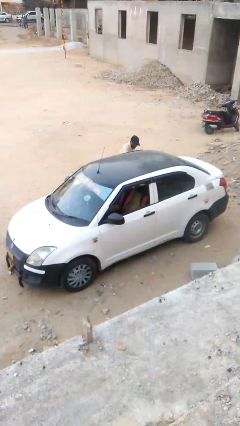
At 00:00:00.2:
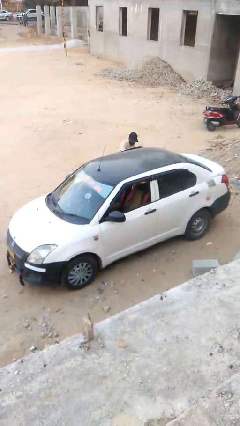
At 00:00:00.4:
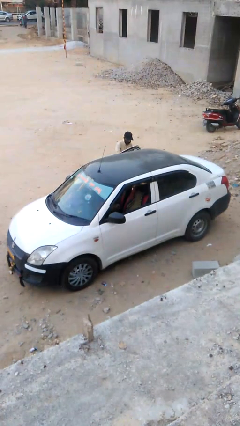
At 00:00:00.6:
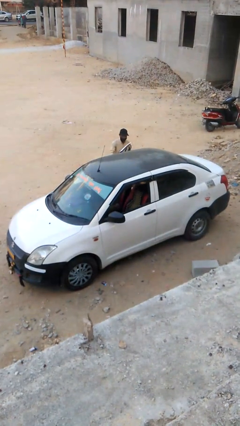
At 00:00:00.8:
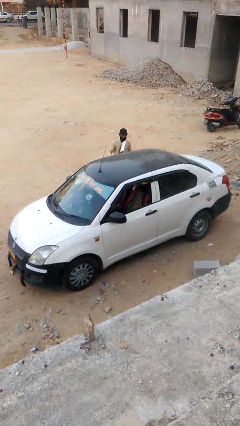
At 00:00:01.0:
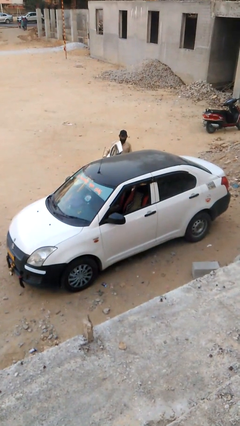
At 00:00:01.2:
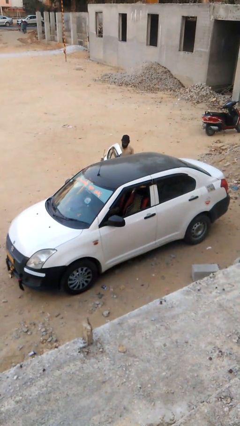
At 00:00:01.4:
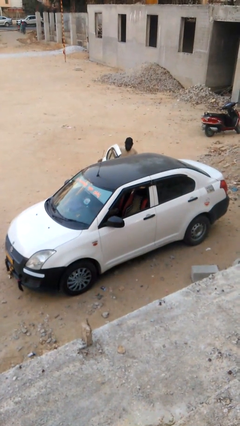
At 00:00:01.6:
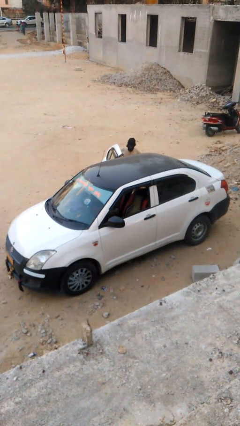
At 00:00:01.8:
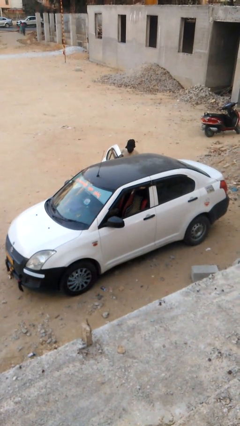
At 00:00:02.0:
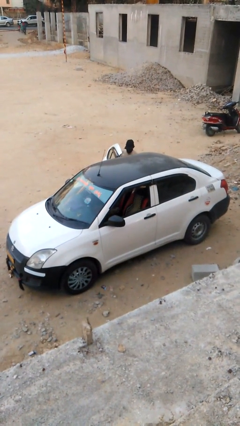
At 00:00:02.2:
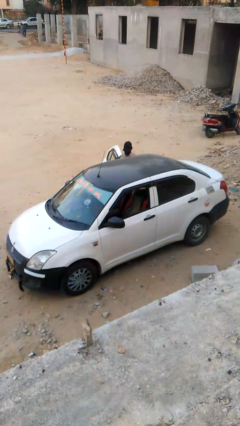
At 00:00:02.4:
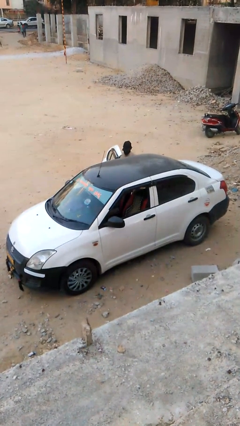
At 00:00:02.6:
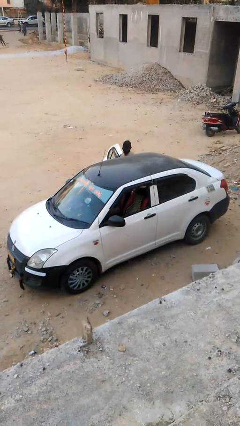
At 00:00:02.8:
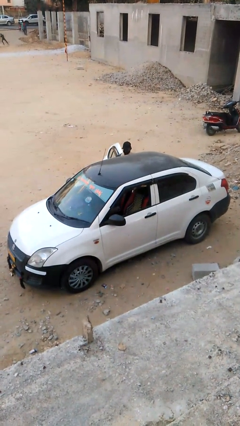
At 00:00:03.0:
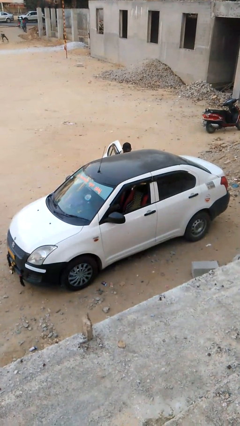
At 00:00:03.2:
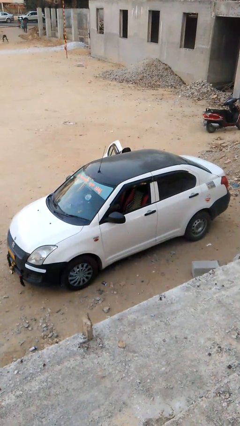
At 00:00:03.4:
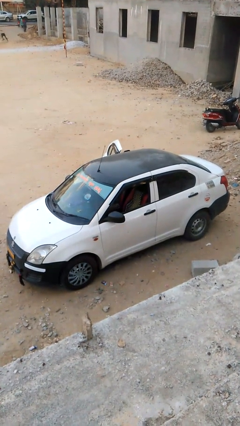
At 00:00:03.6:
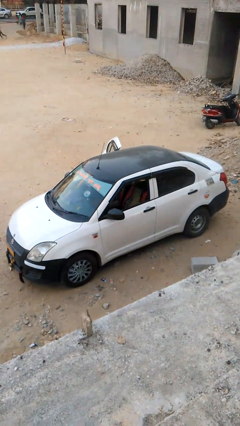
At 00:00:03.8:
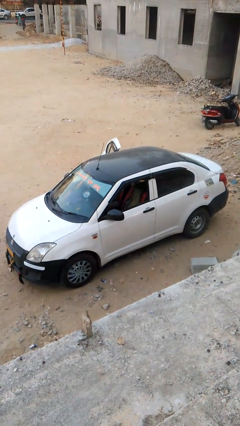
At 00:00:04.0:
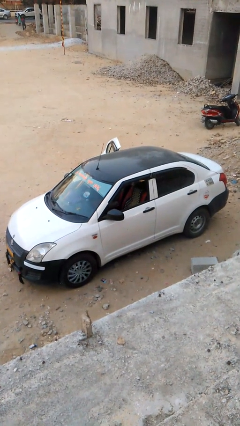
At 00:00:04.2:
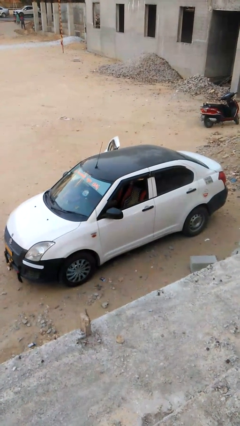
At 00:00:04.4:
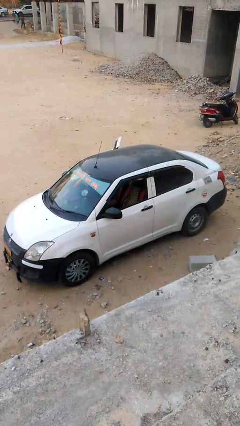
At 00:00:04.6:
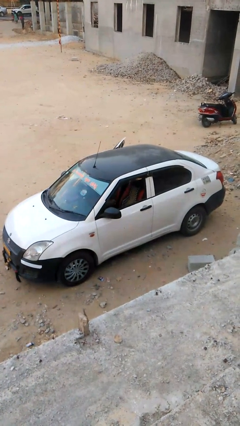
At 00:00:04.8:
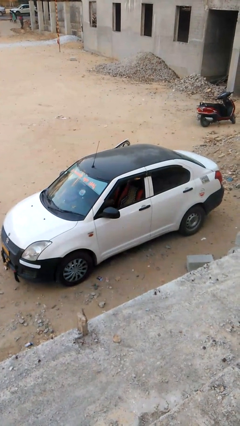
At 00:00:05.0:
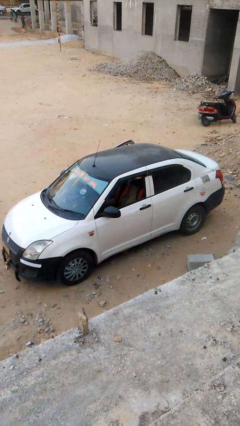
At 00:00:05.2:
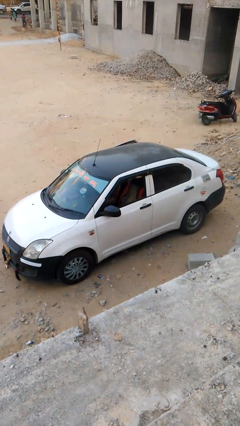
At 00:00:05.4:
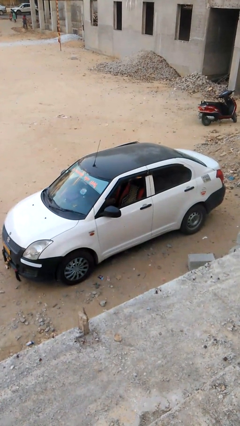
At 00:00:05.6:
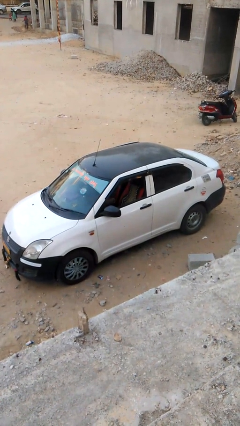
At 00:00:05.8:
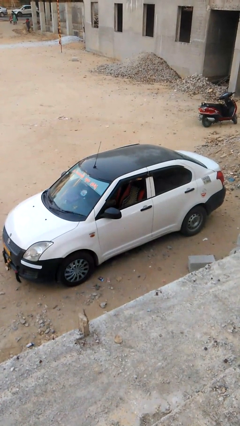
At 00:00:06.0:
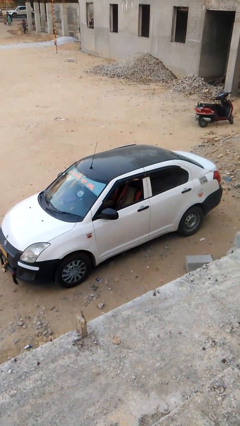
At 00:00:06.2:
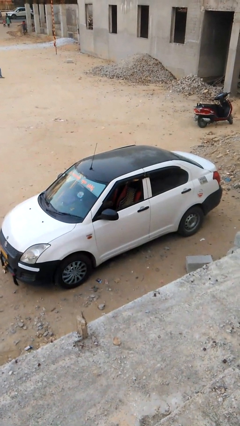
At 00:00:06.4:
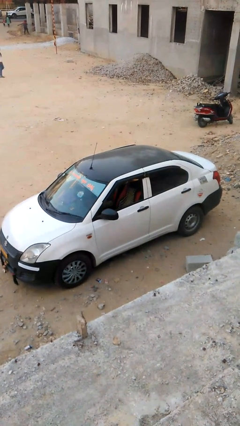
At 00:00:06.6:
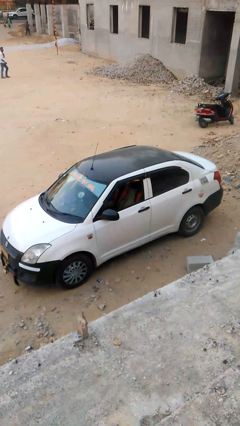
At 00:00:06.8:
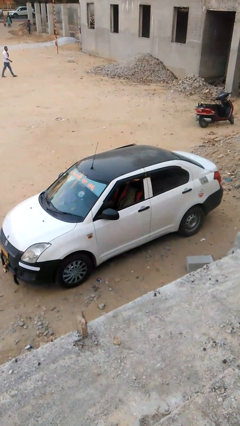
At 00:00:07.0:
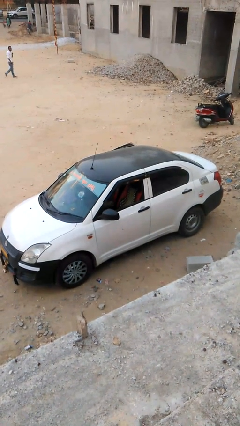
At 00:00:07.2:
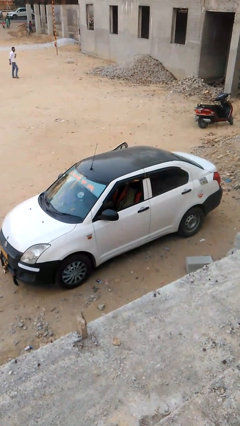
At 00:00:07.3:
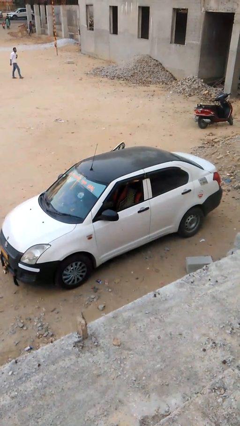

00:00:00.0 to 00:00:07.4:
car picks up person

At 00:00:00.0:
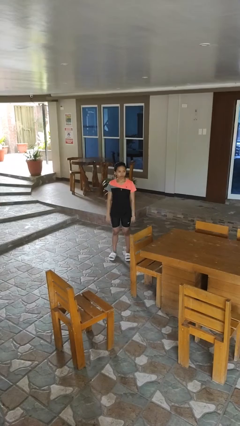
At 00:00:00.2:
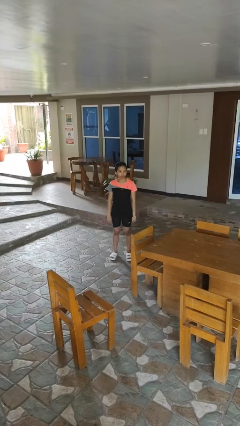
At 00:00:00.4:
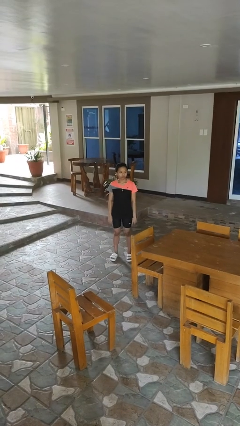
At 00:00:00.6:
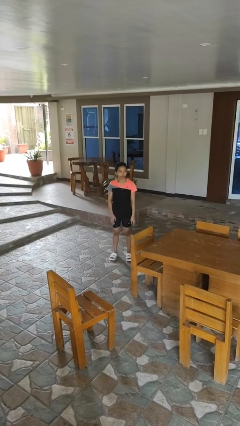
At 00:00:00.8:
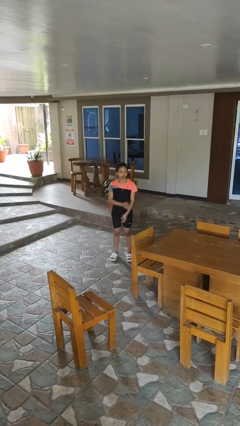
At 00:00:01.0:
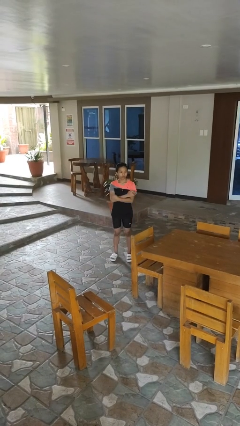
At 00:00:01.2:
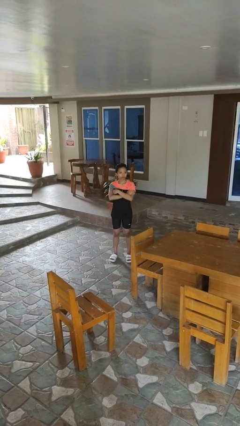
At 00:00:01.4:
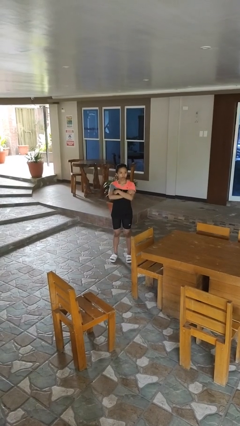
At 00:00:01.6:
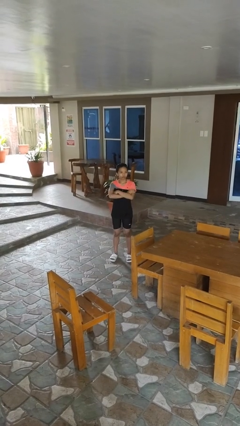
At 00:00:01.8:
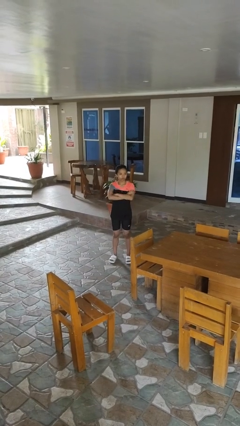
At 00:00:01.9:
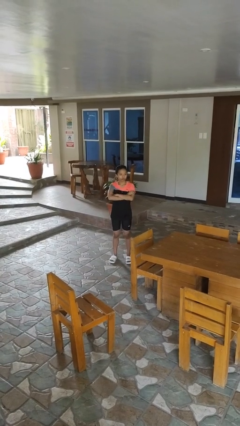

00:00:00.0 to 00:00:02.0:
person crosses arms

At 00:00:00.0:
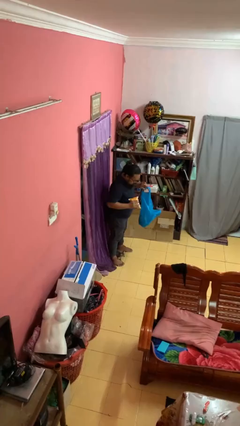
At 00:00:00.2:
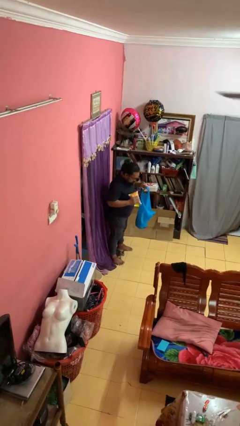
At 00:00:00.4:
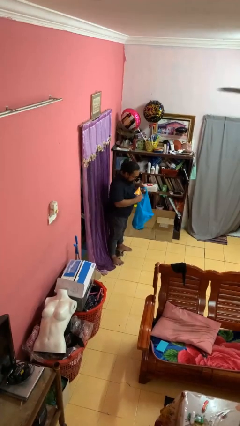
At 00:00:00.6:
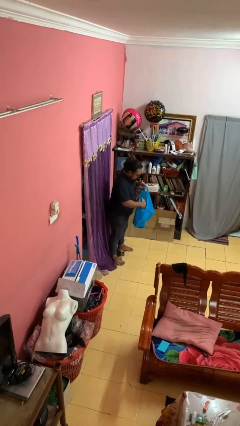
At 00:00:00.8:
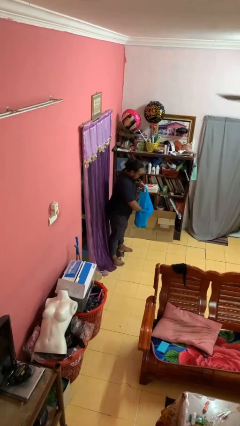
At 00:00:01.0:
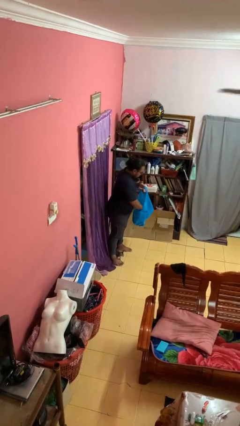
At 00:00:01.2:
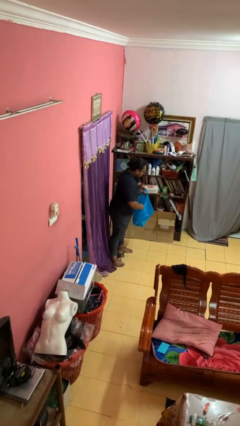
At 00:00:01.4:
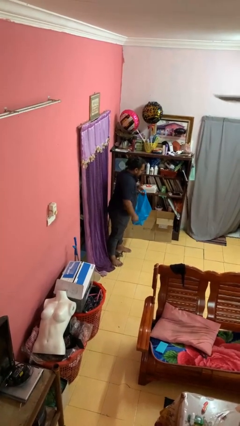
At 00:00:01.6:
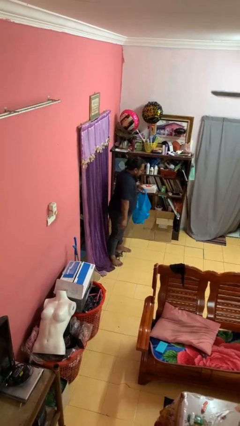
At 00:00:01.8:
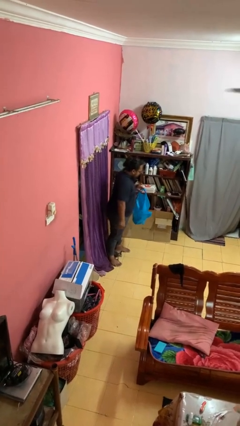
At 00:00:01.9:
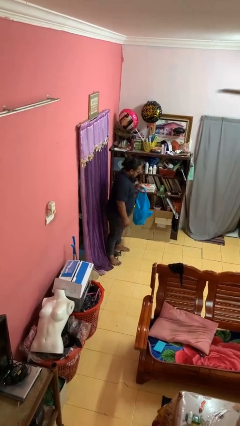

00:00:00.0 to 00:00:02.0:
person puts object into bag

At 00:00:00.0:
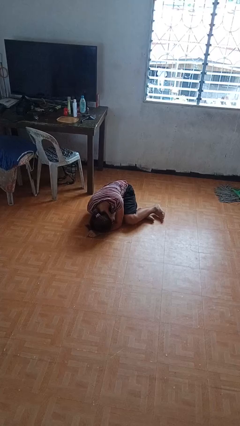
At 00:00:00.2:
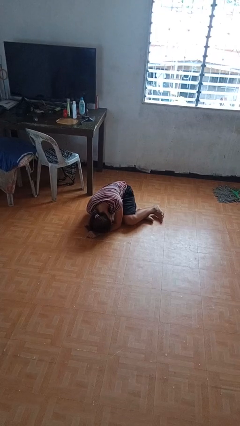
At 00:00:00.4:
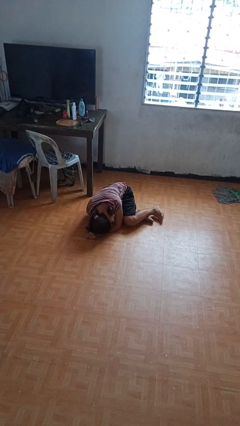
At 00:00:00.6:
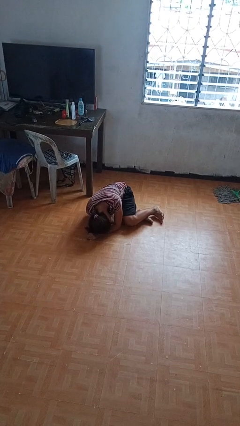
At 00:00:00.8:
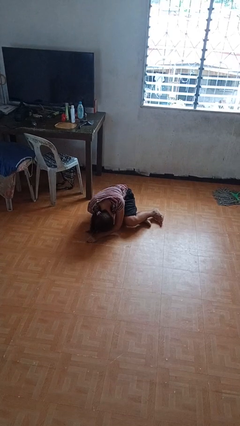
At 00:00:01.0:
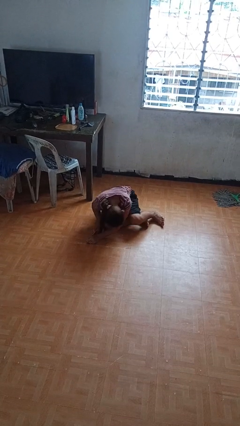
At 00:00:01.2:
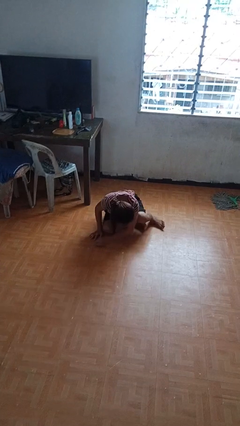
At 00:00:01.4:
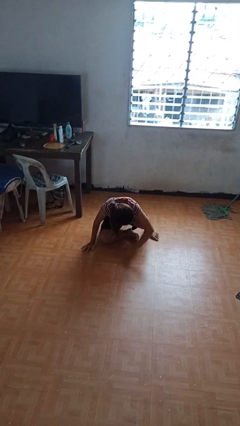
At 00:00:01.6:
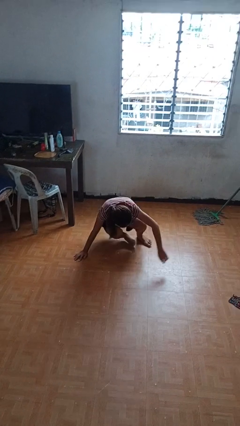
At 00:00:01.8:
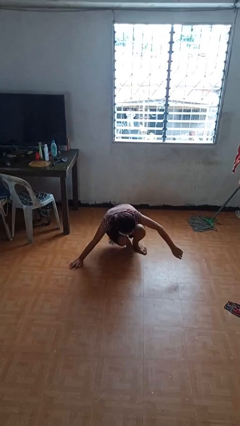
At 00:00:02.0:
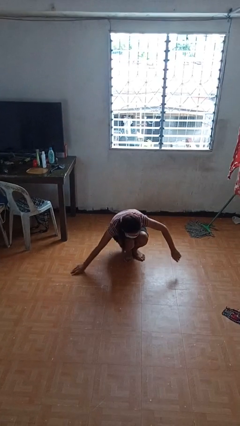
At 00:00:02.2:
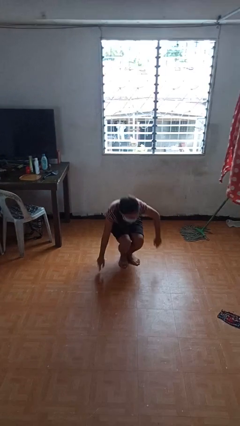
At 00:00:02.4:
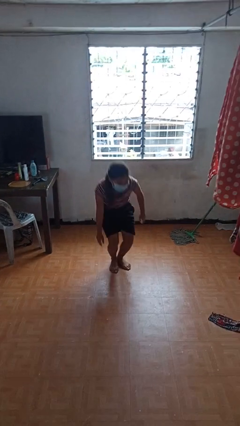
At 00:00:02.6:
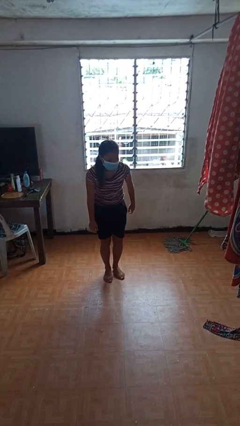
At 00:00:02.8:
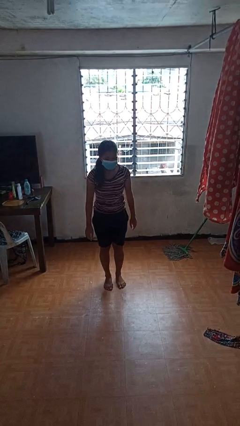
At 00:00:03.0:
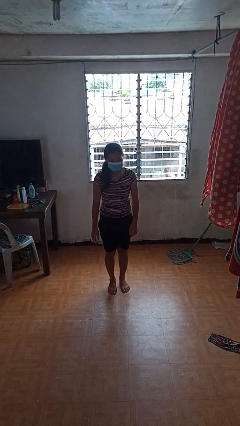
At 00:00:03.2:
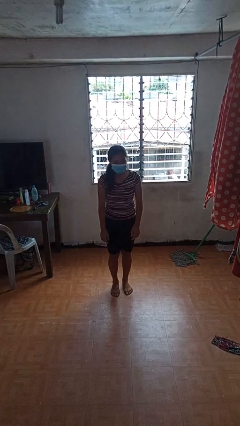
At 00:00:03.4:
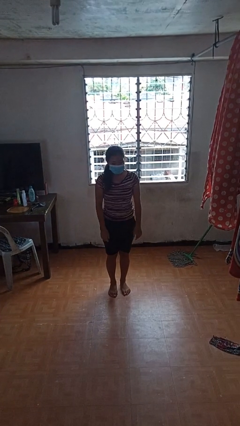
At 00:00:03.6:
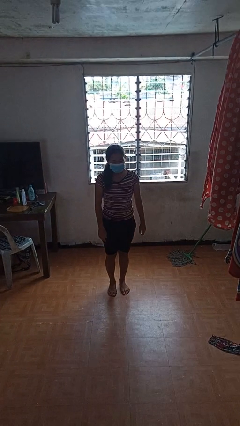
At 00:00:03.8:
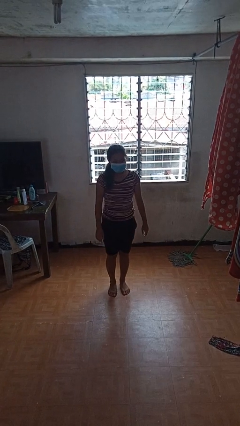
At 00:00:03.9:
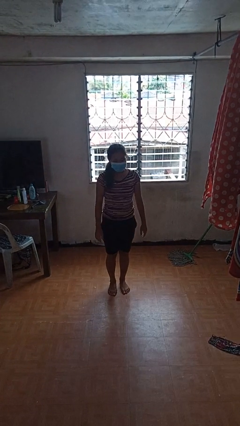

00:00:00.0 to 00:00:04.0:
person stands up from floor

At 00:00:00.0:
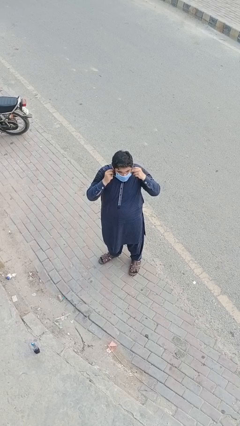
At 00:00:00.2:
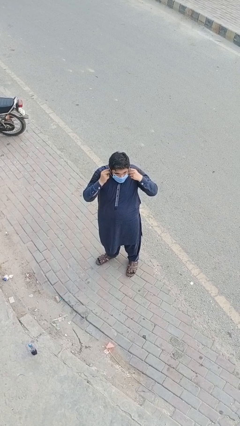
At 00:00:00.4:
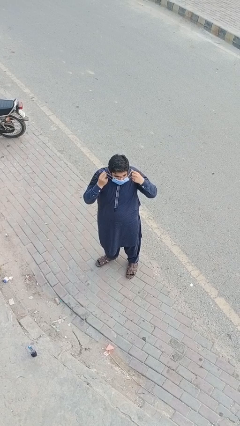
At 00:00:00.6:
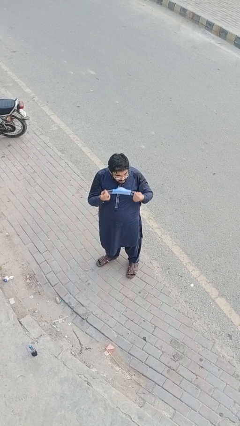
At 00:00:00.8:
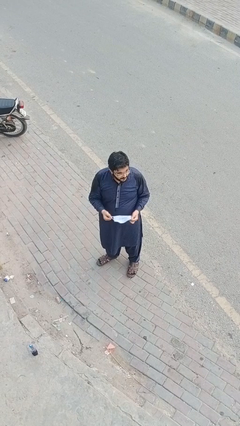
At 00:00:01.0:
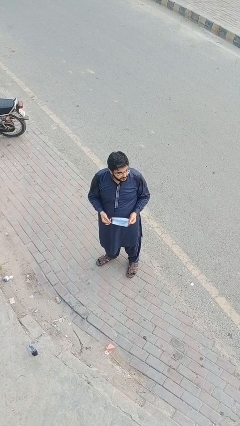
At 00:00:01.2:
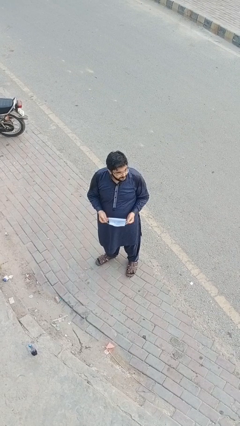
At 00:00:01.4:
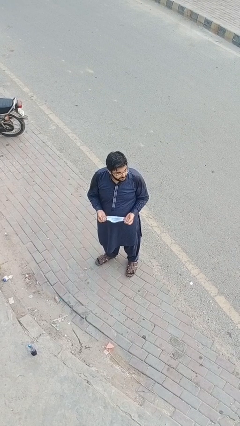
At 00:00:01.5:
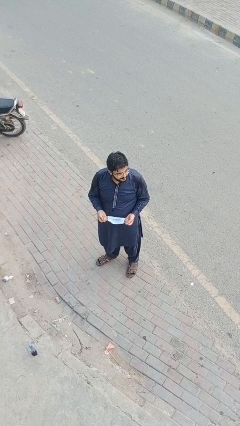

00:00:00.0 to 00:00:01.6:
person takes off facemask

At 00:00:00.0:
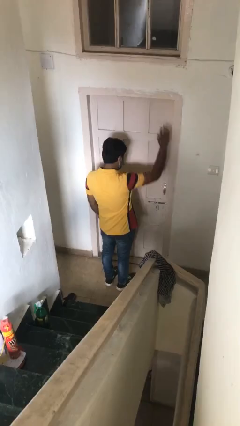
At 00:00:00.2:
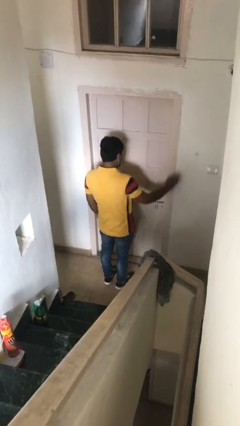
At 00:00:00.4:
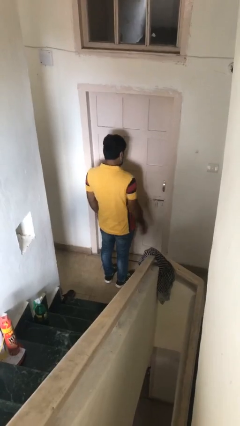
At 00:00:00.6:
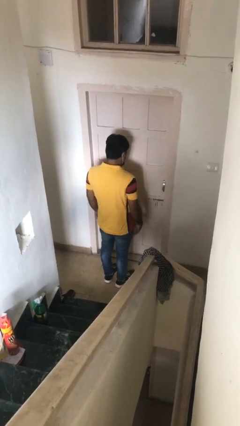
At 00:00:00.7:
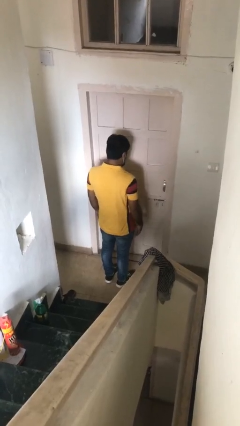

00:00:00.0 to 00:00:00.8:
person gestures lower hand
